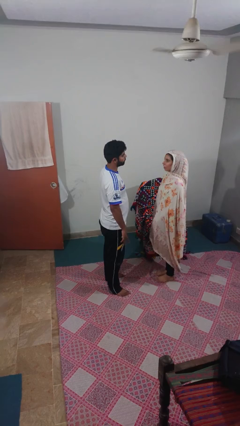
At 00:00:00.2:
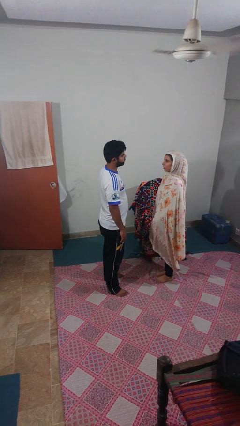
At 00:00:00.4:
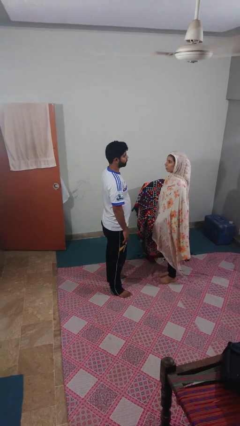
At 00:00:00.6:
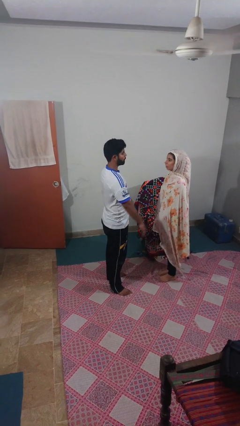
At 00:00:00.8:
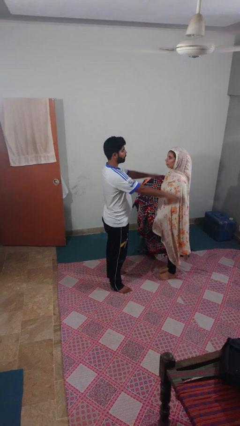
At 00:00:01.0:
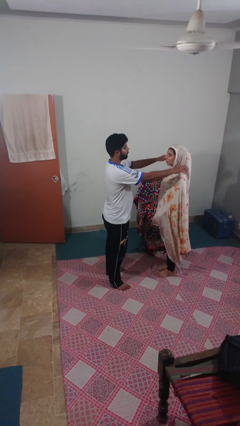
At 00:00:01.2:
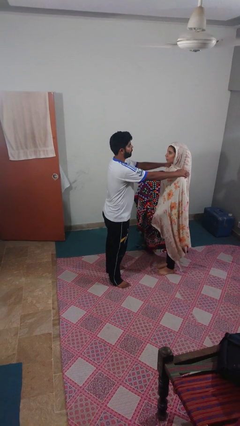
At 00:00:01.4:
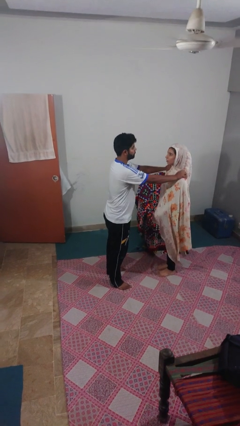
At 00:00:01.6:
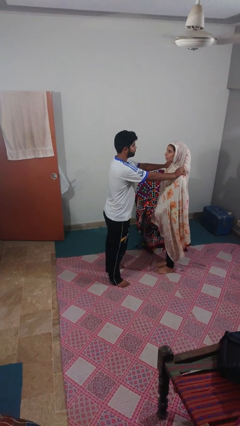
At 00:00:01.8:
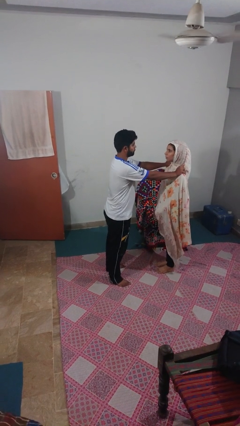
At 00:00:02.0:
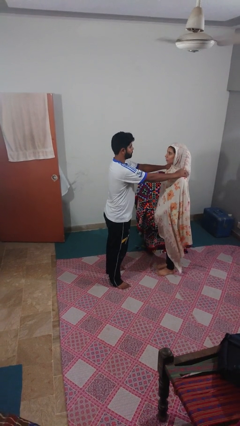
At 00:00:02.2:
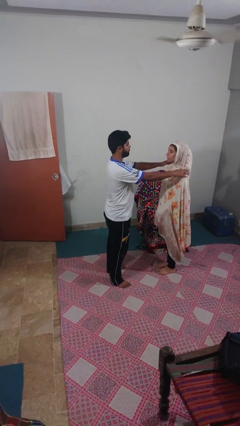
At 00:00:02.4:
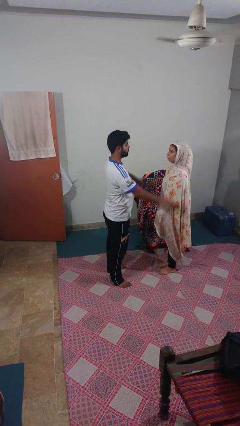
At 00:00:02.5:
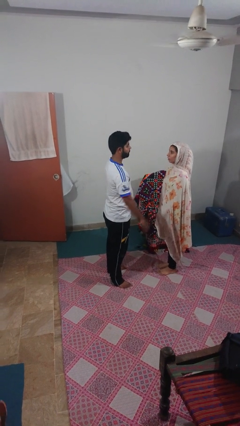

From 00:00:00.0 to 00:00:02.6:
person pounds shoulders of person

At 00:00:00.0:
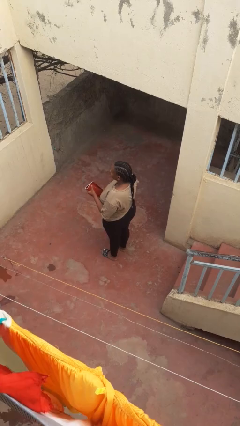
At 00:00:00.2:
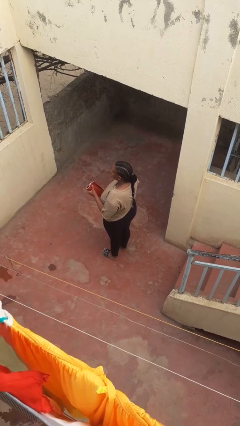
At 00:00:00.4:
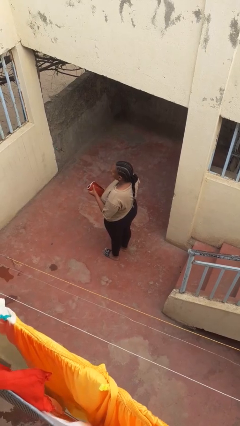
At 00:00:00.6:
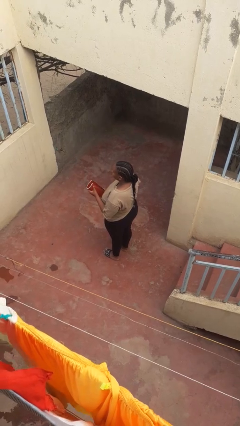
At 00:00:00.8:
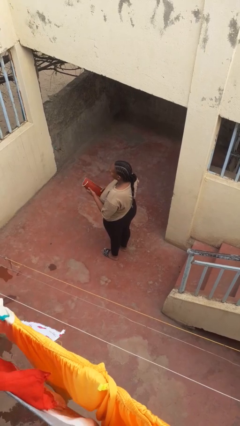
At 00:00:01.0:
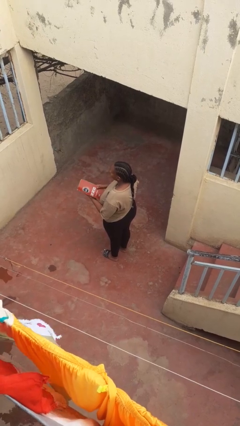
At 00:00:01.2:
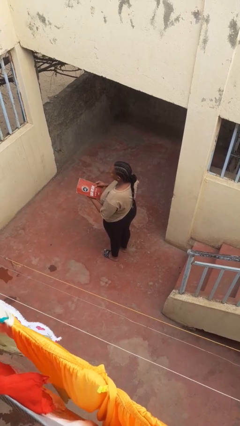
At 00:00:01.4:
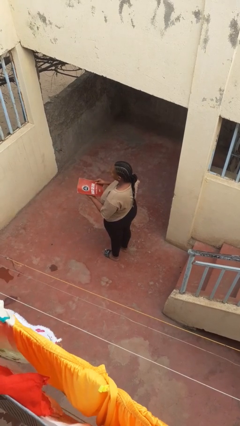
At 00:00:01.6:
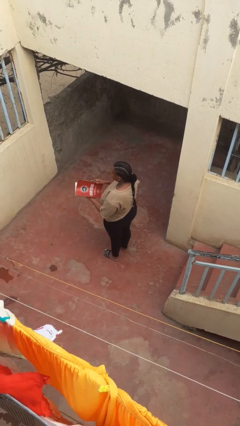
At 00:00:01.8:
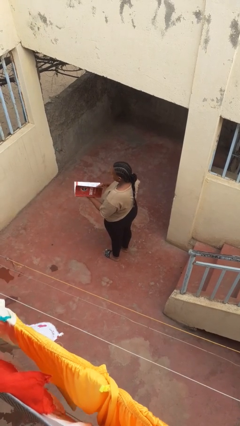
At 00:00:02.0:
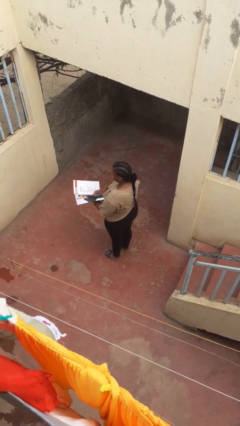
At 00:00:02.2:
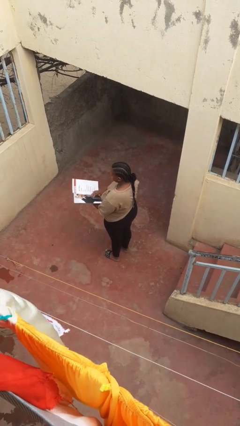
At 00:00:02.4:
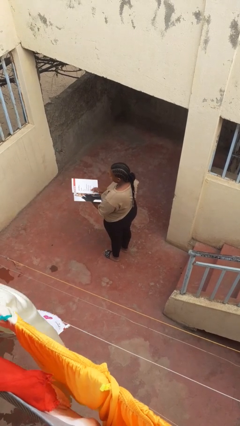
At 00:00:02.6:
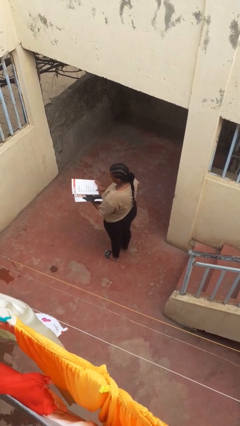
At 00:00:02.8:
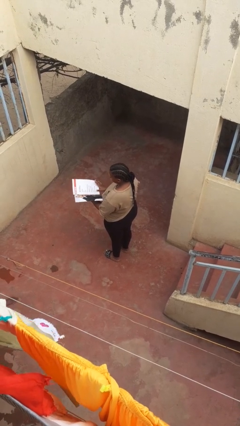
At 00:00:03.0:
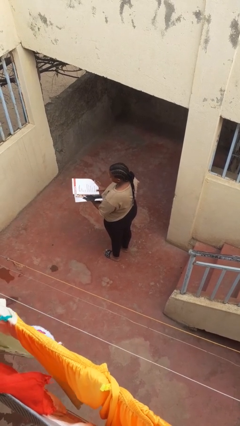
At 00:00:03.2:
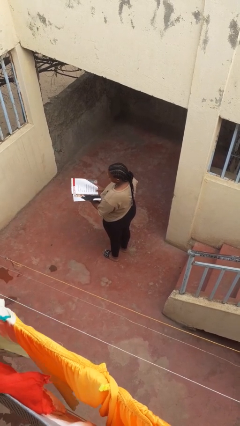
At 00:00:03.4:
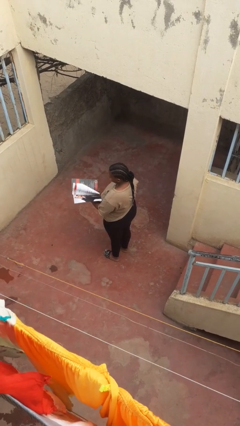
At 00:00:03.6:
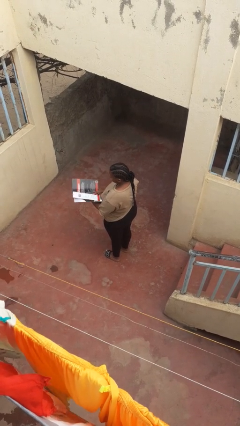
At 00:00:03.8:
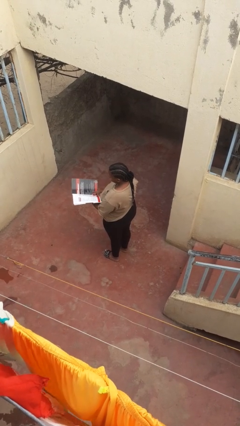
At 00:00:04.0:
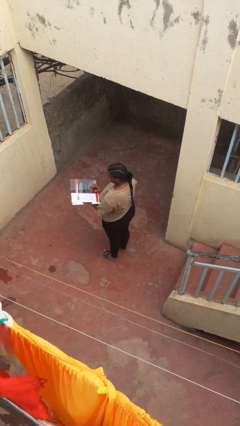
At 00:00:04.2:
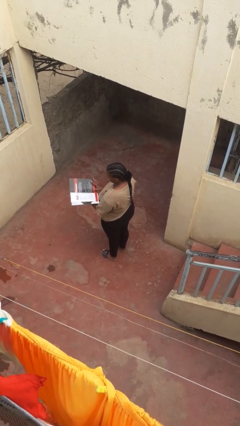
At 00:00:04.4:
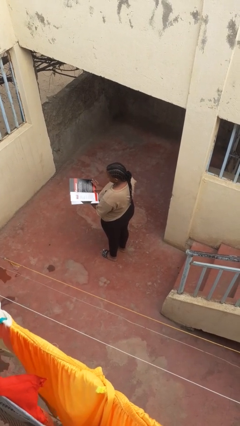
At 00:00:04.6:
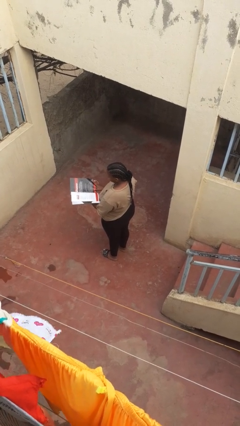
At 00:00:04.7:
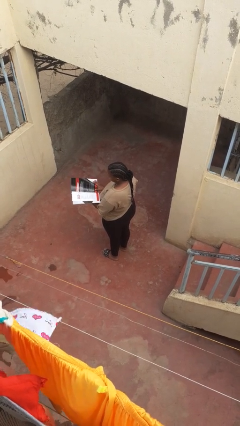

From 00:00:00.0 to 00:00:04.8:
person reads magazine

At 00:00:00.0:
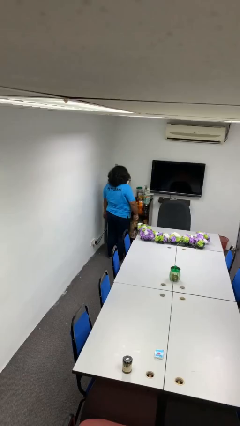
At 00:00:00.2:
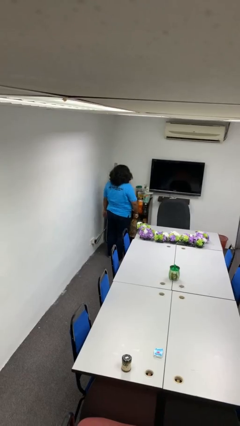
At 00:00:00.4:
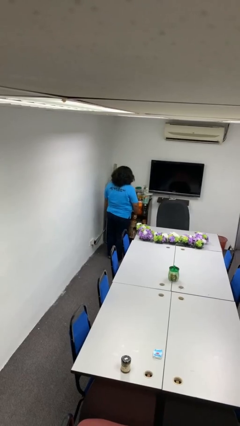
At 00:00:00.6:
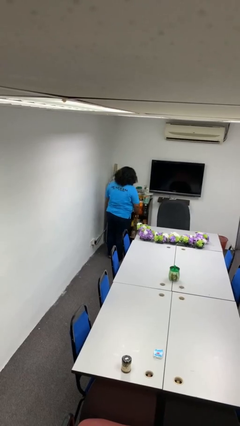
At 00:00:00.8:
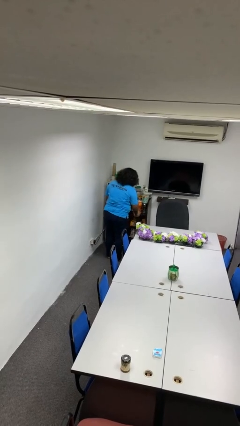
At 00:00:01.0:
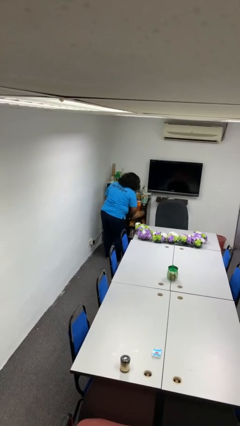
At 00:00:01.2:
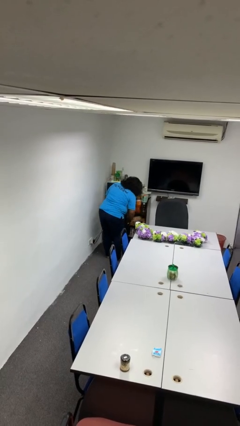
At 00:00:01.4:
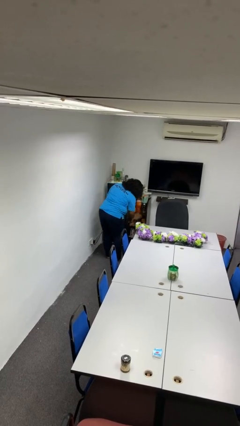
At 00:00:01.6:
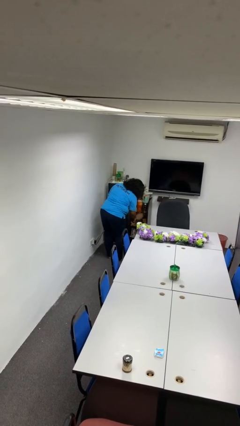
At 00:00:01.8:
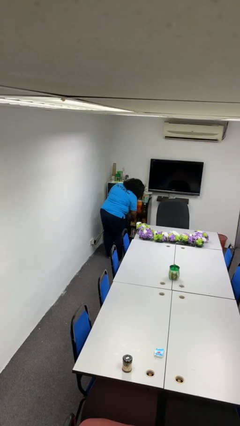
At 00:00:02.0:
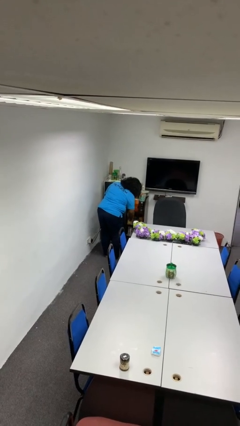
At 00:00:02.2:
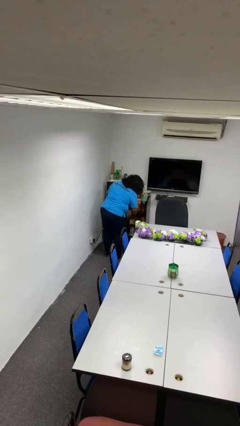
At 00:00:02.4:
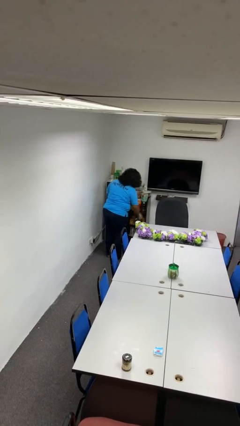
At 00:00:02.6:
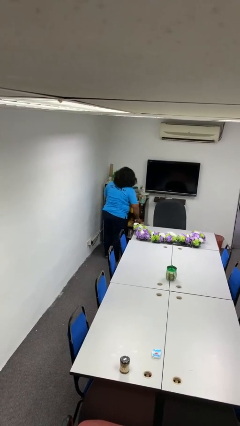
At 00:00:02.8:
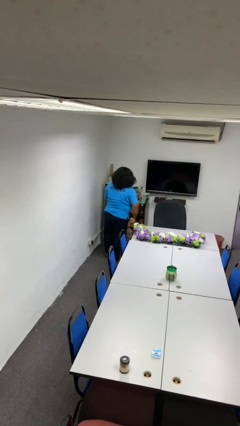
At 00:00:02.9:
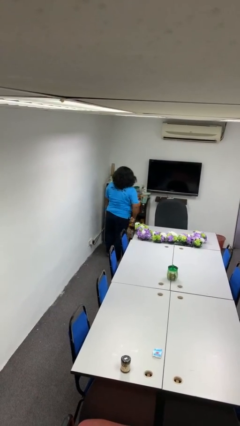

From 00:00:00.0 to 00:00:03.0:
person dusts furniture

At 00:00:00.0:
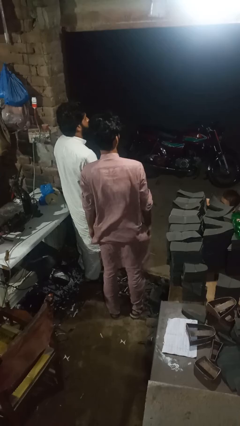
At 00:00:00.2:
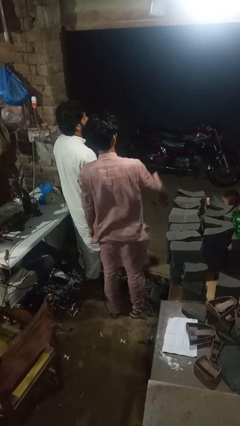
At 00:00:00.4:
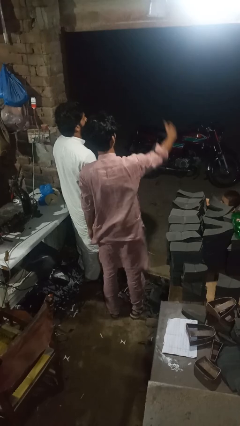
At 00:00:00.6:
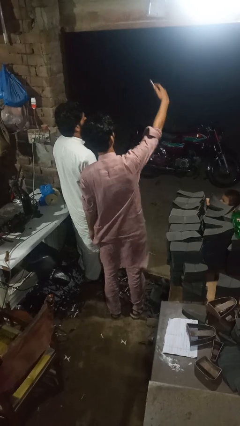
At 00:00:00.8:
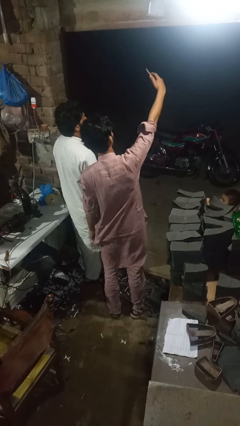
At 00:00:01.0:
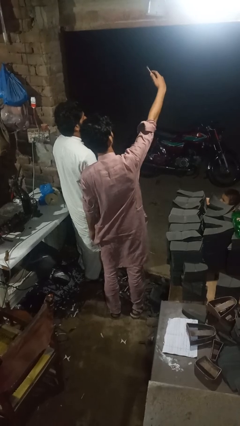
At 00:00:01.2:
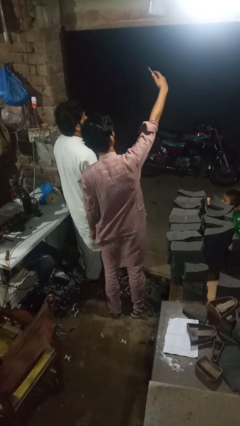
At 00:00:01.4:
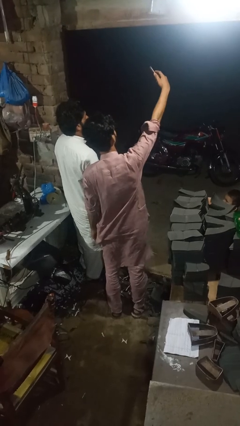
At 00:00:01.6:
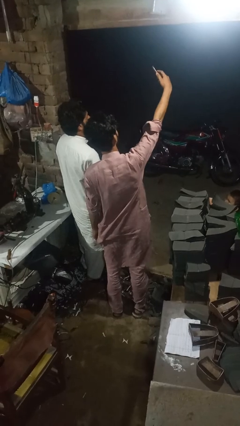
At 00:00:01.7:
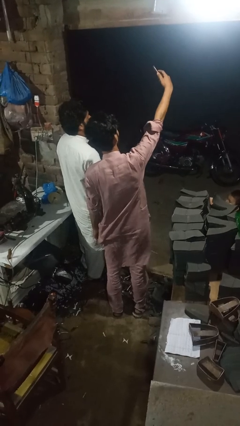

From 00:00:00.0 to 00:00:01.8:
person takes selfie with person

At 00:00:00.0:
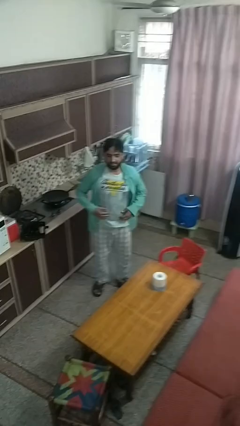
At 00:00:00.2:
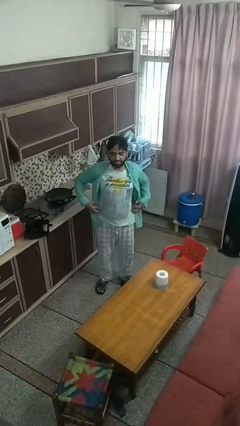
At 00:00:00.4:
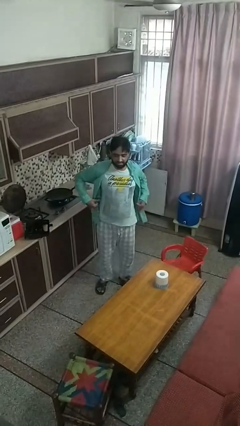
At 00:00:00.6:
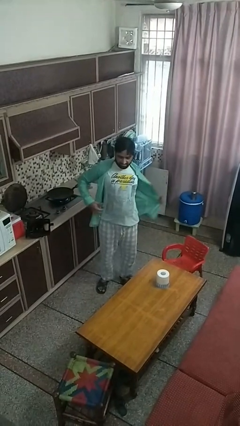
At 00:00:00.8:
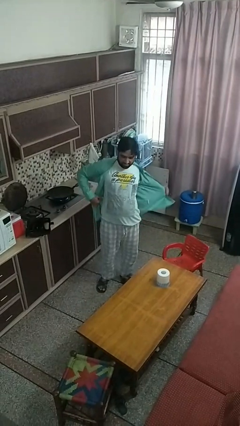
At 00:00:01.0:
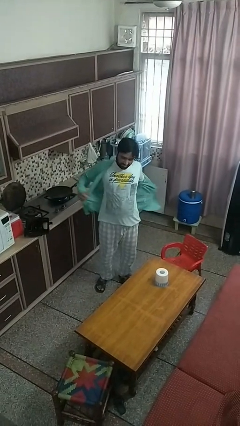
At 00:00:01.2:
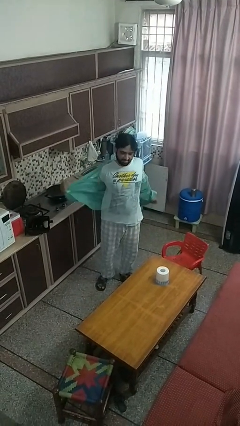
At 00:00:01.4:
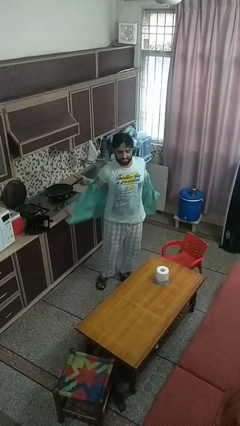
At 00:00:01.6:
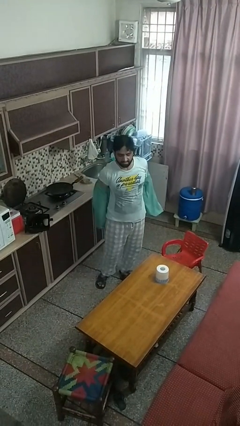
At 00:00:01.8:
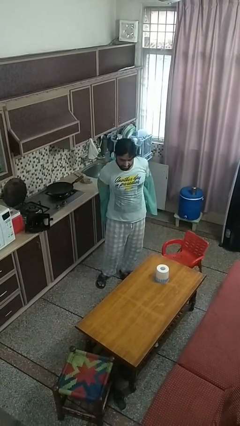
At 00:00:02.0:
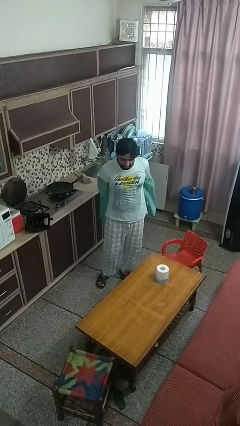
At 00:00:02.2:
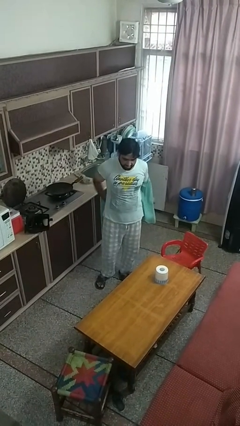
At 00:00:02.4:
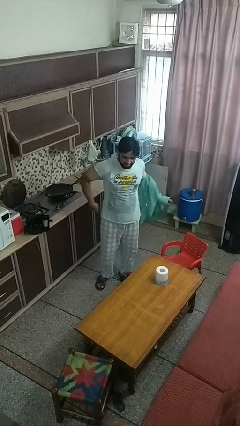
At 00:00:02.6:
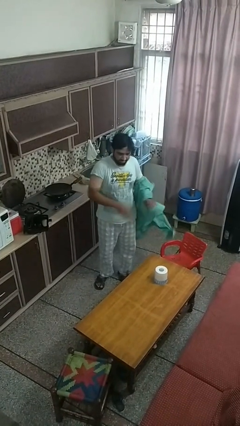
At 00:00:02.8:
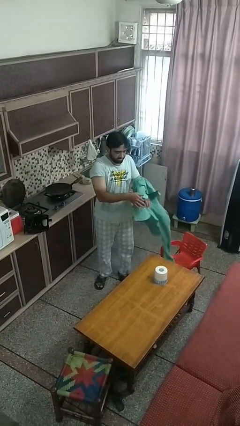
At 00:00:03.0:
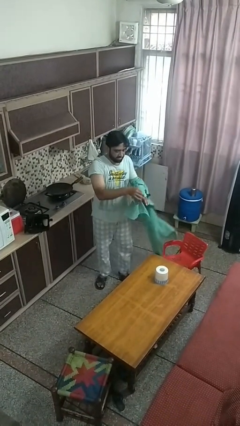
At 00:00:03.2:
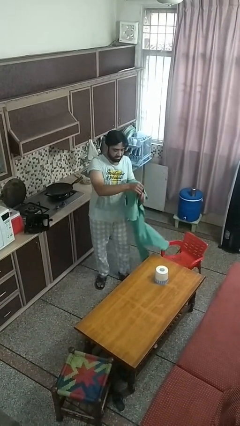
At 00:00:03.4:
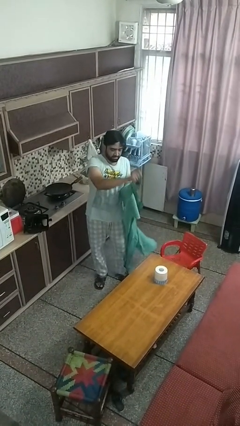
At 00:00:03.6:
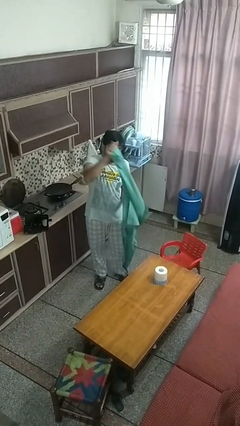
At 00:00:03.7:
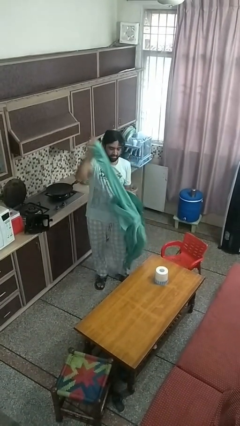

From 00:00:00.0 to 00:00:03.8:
person takes off shirt

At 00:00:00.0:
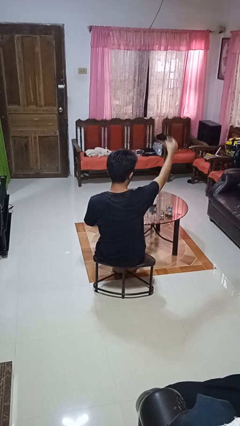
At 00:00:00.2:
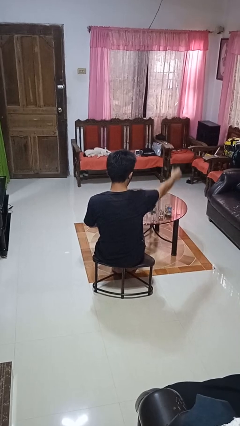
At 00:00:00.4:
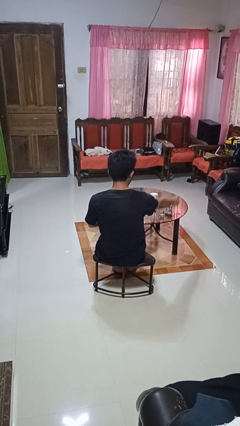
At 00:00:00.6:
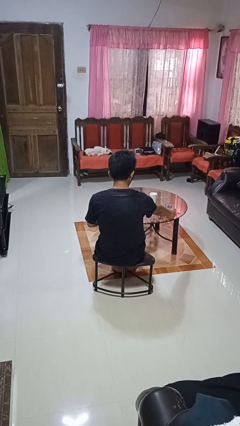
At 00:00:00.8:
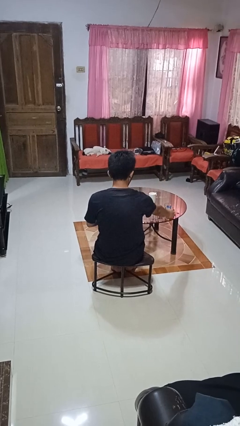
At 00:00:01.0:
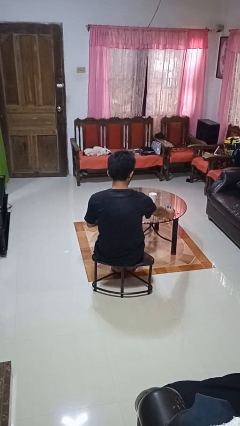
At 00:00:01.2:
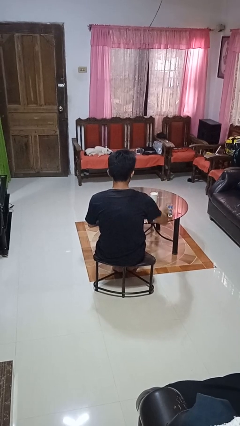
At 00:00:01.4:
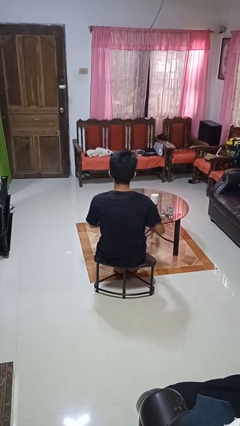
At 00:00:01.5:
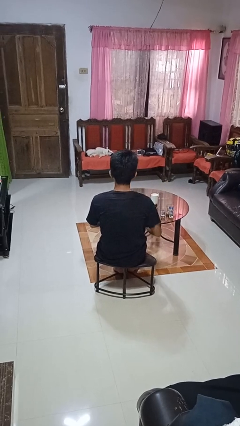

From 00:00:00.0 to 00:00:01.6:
person puts down object on table
